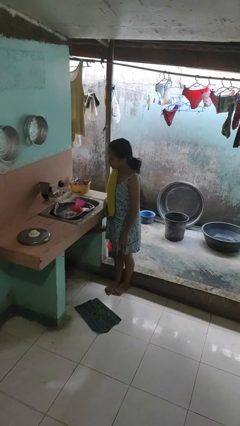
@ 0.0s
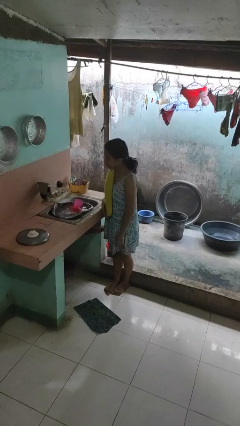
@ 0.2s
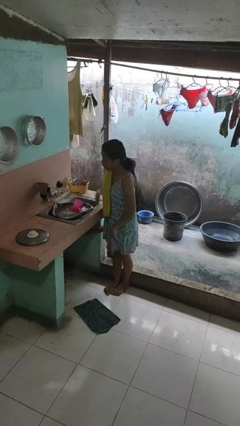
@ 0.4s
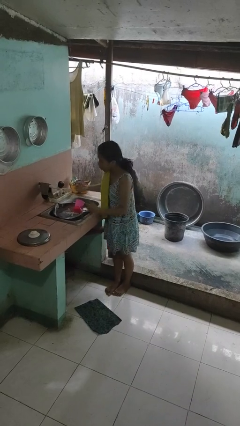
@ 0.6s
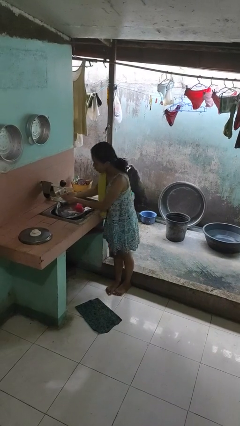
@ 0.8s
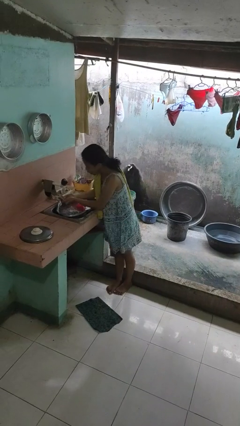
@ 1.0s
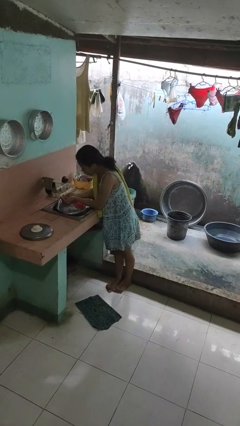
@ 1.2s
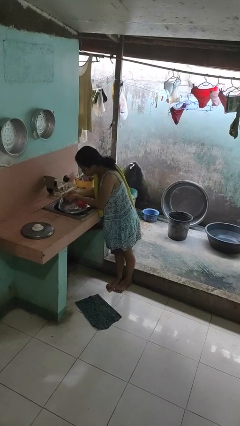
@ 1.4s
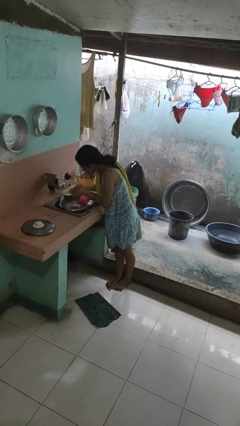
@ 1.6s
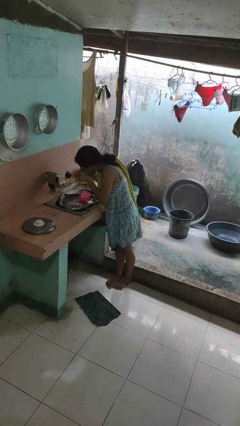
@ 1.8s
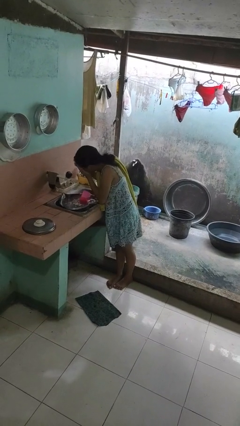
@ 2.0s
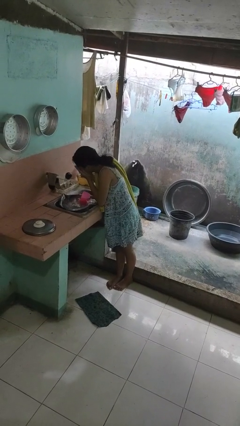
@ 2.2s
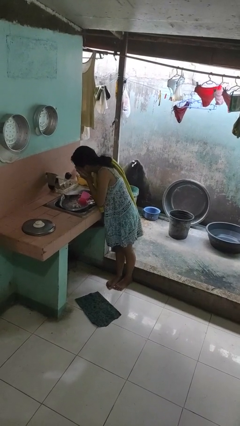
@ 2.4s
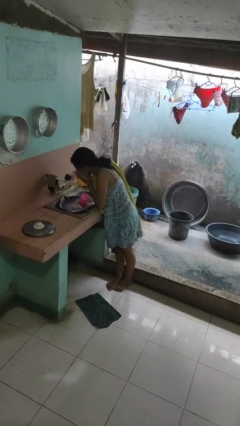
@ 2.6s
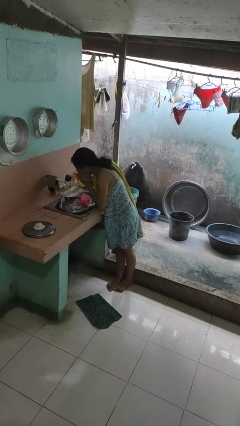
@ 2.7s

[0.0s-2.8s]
person washes face

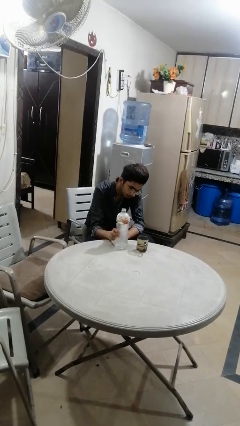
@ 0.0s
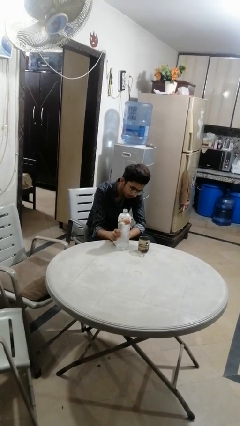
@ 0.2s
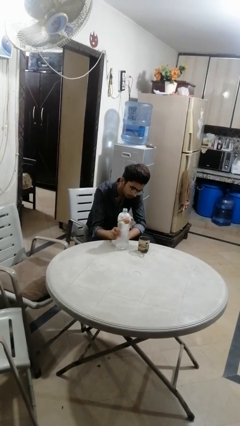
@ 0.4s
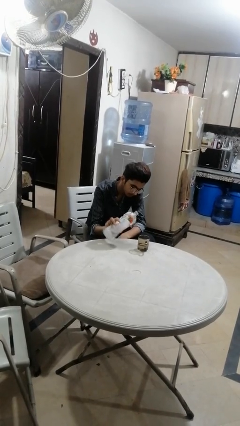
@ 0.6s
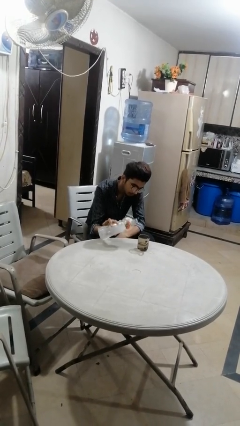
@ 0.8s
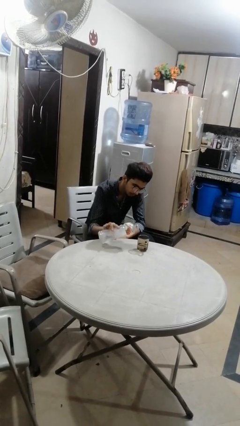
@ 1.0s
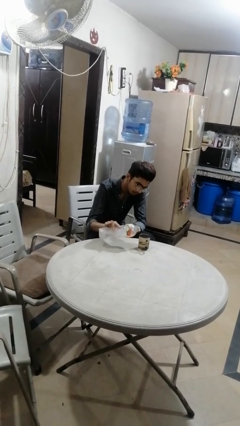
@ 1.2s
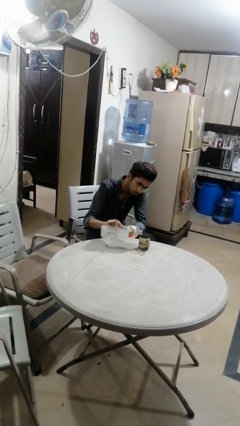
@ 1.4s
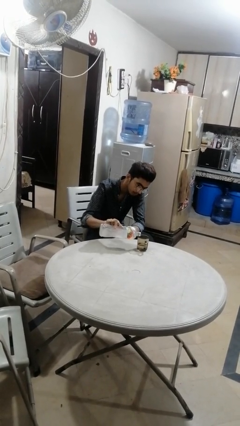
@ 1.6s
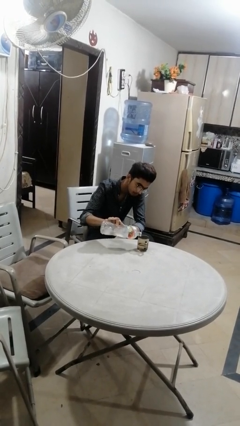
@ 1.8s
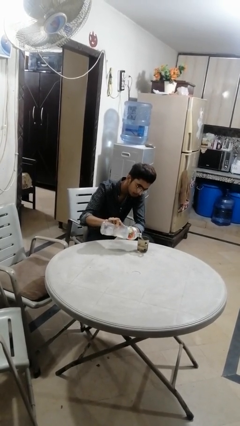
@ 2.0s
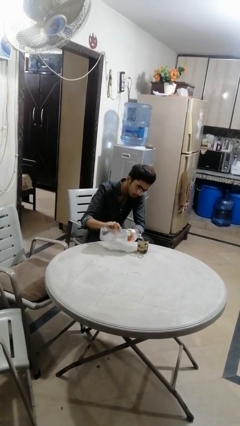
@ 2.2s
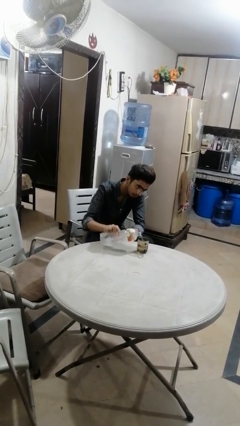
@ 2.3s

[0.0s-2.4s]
person pours liquid into cup

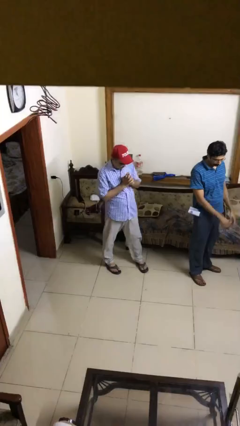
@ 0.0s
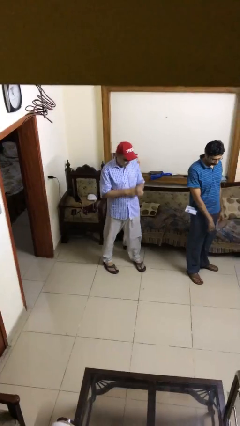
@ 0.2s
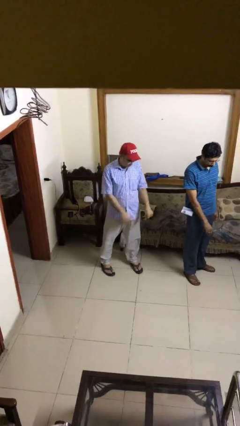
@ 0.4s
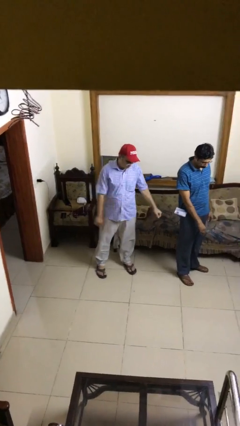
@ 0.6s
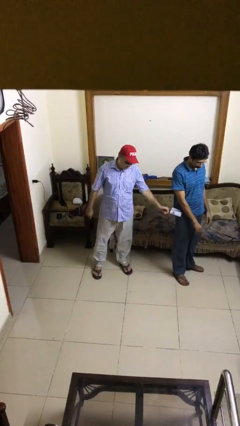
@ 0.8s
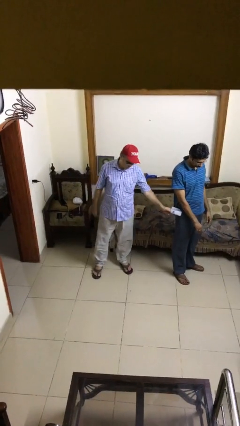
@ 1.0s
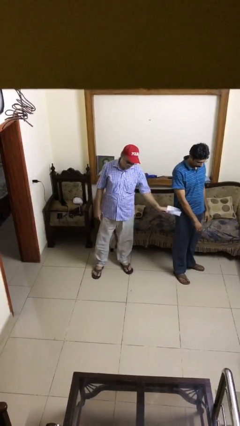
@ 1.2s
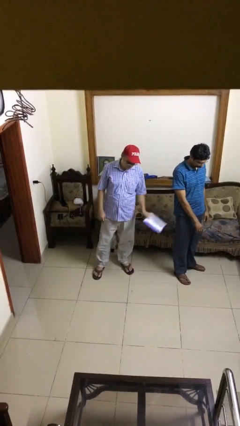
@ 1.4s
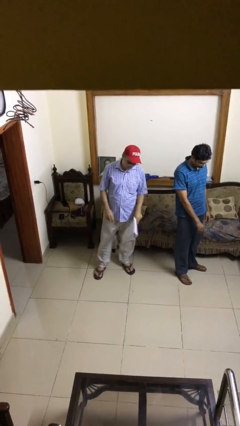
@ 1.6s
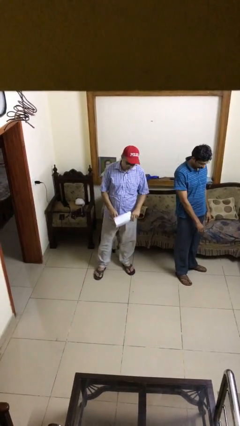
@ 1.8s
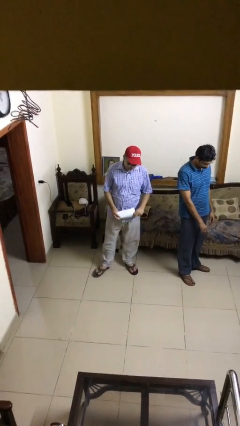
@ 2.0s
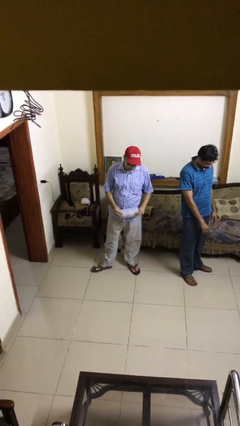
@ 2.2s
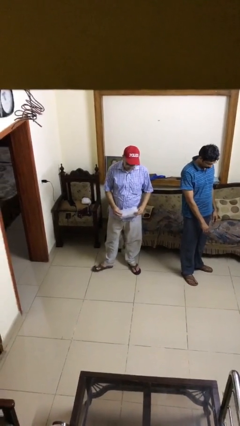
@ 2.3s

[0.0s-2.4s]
person steals object from person

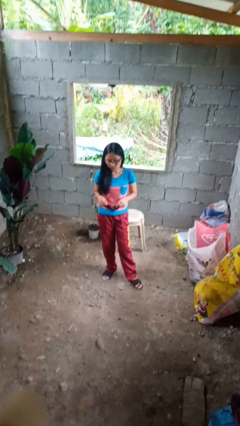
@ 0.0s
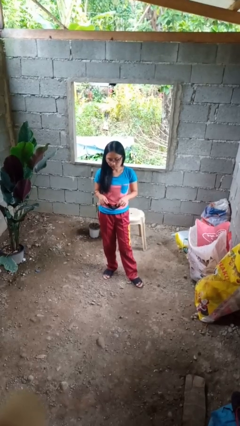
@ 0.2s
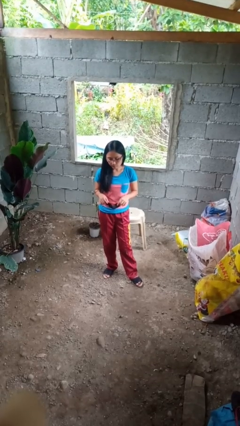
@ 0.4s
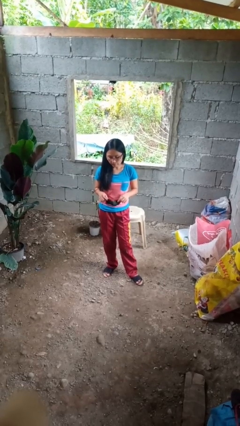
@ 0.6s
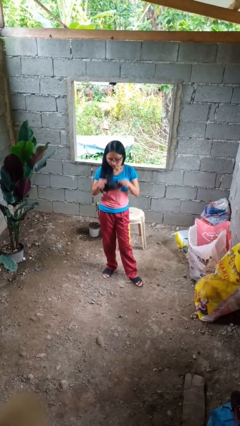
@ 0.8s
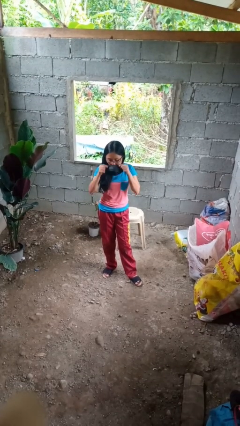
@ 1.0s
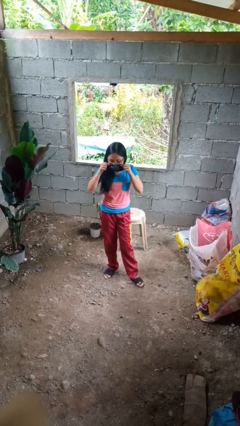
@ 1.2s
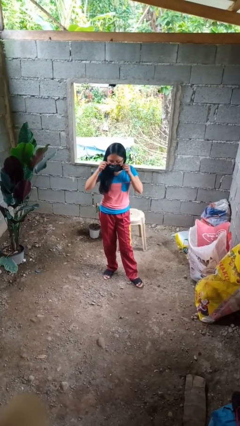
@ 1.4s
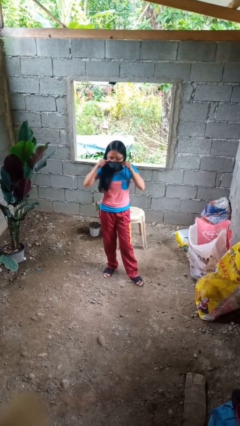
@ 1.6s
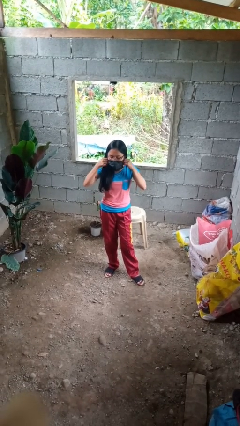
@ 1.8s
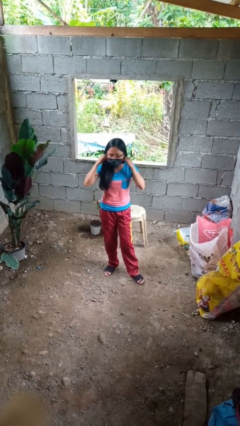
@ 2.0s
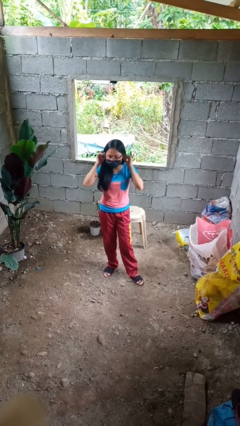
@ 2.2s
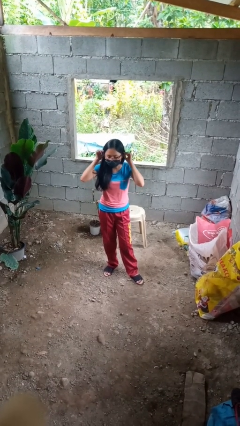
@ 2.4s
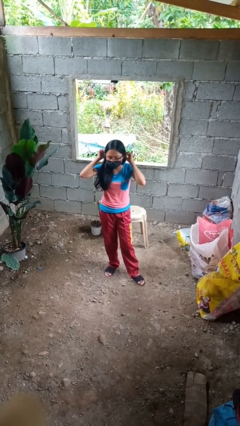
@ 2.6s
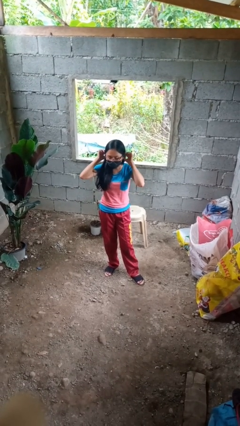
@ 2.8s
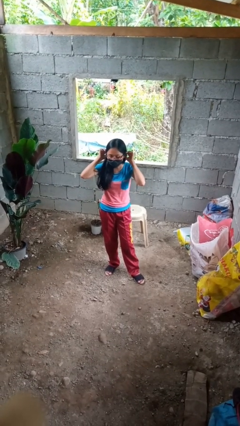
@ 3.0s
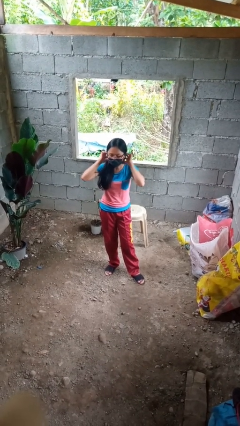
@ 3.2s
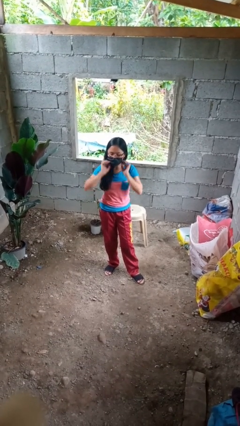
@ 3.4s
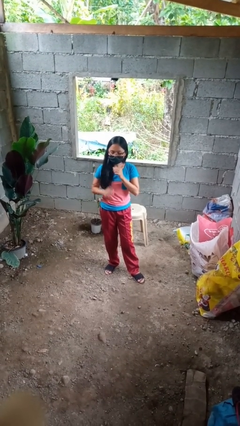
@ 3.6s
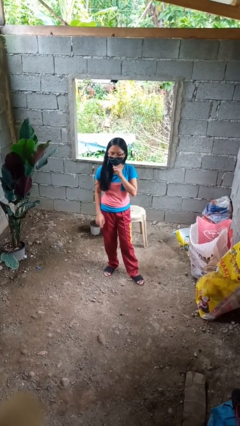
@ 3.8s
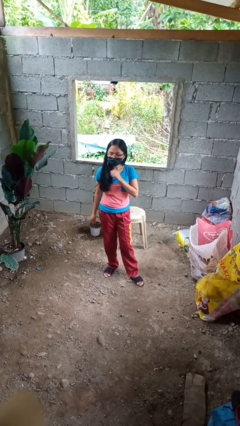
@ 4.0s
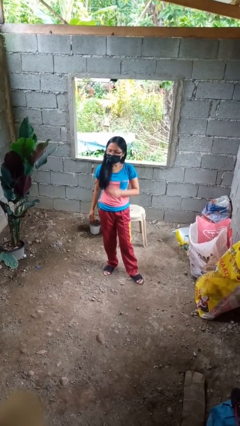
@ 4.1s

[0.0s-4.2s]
person puts on facemask

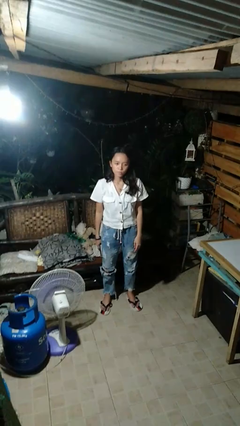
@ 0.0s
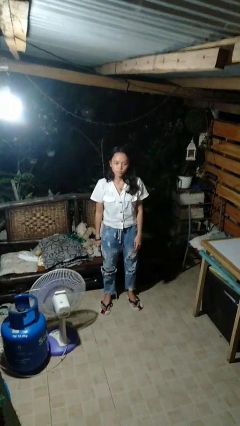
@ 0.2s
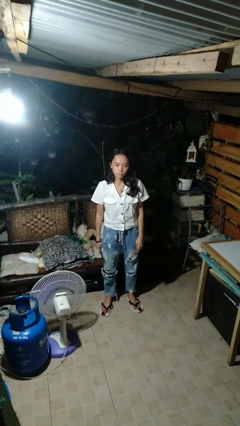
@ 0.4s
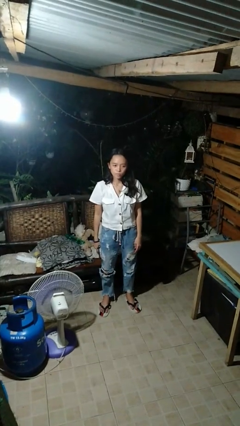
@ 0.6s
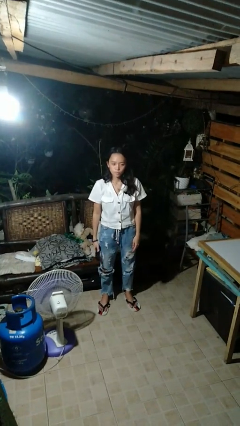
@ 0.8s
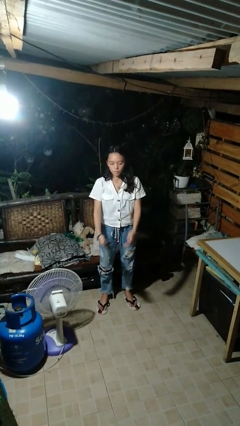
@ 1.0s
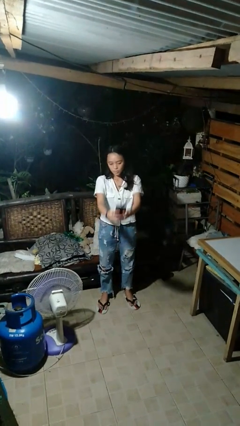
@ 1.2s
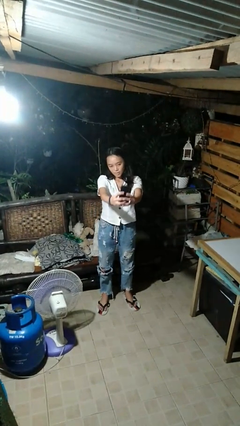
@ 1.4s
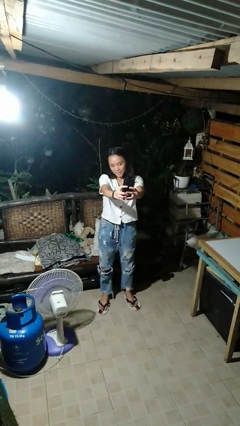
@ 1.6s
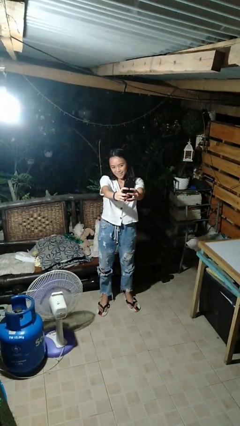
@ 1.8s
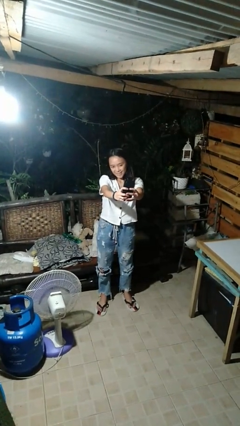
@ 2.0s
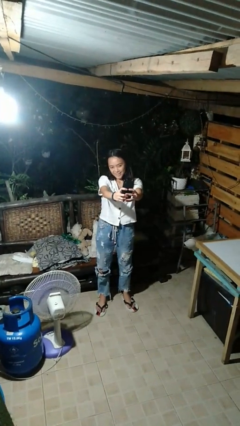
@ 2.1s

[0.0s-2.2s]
person takes selfie

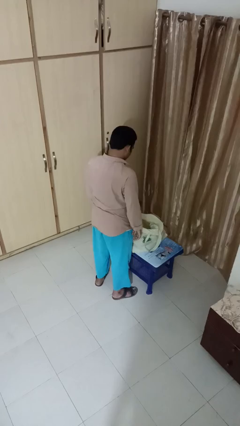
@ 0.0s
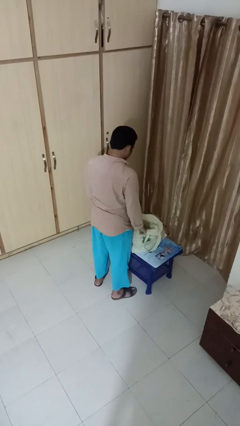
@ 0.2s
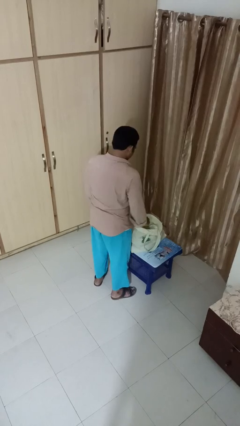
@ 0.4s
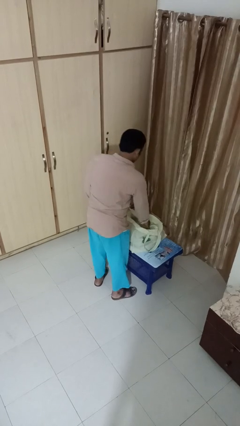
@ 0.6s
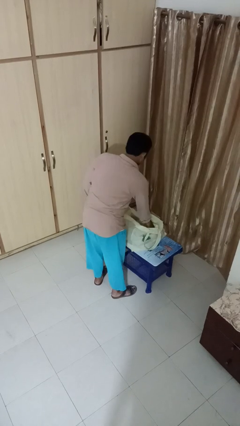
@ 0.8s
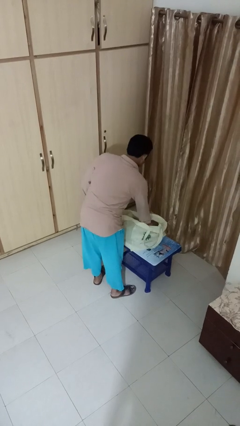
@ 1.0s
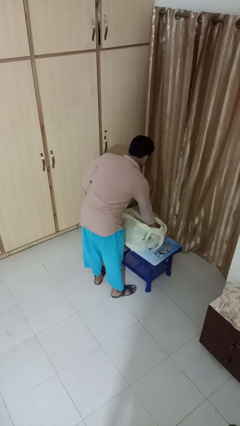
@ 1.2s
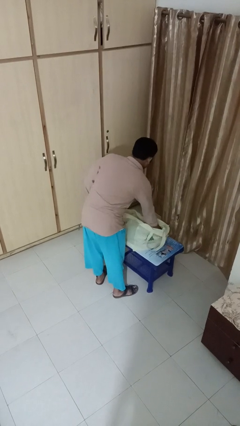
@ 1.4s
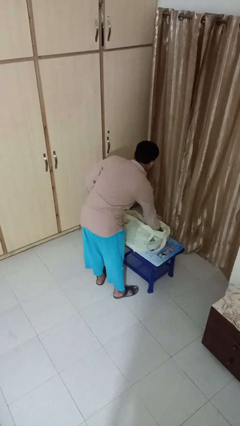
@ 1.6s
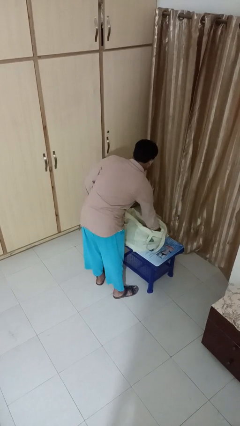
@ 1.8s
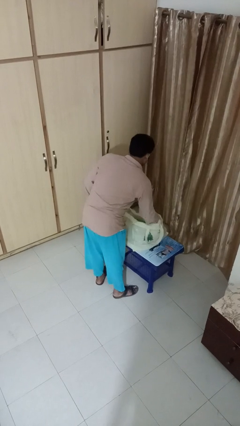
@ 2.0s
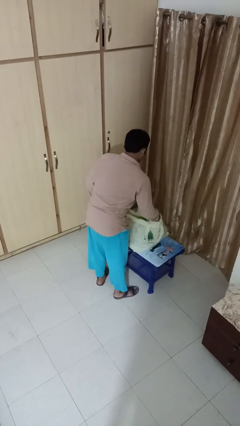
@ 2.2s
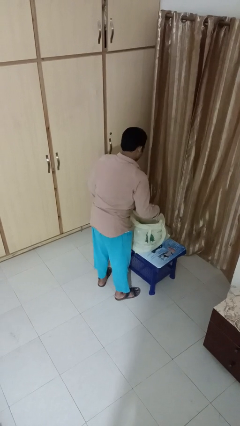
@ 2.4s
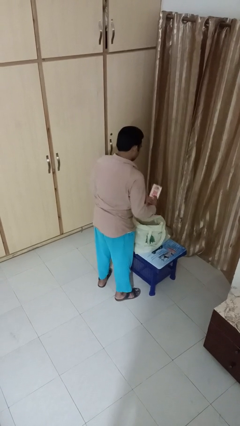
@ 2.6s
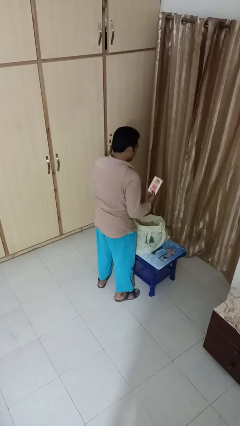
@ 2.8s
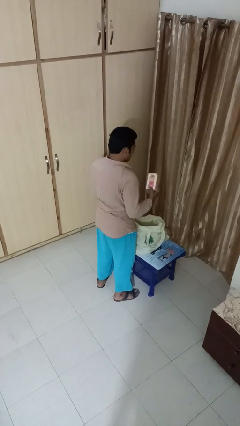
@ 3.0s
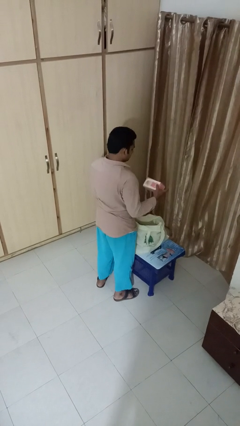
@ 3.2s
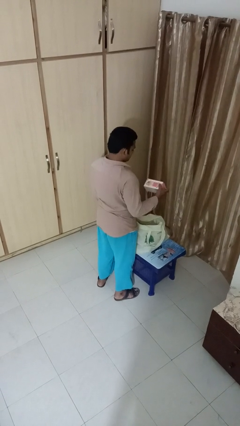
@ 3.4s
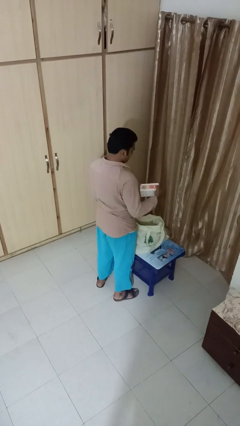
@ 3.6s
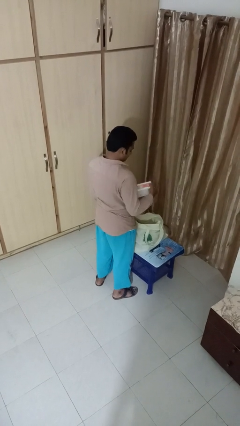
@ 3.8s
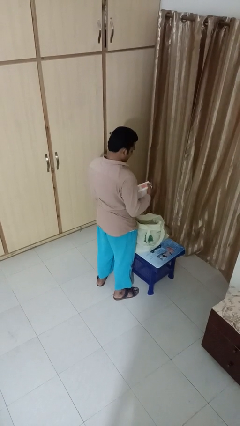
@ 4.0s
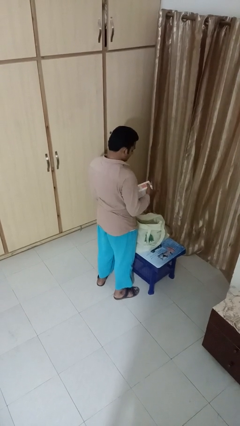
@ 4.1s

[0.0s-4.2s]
person takes object from bag
